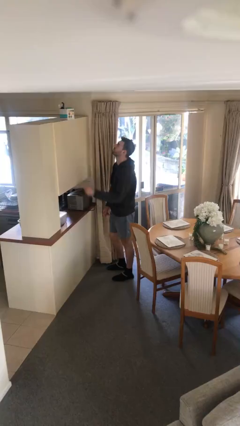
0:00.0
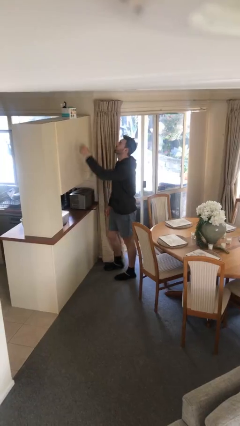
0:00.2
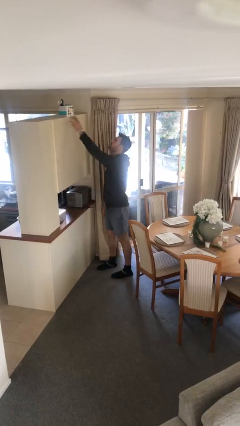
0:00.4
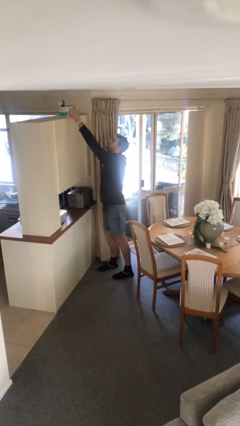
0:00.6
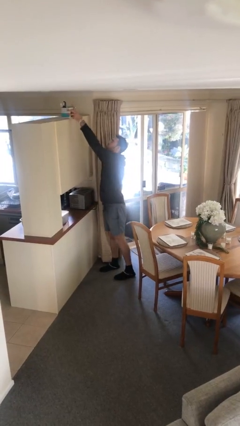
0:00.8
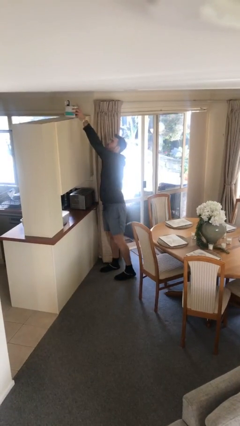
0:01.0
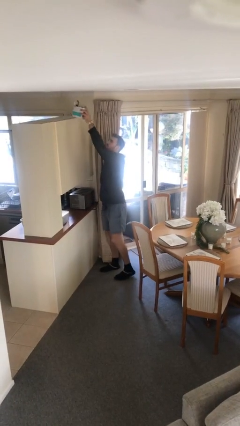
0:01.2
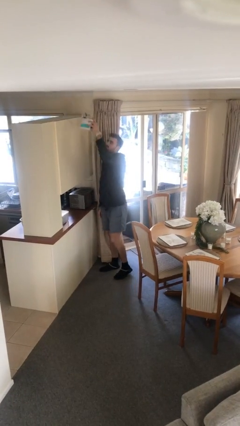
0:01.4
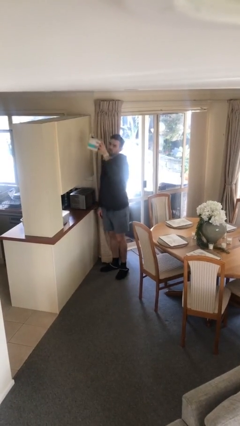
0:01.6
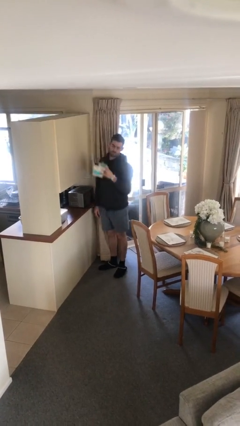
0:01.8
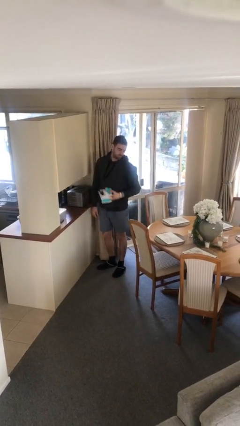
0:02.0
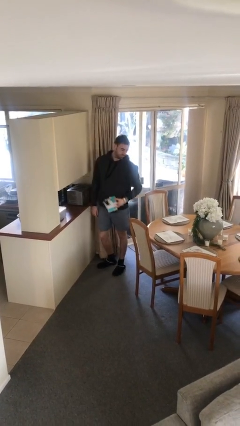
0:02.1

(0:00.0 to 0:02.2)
person picks up object from shelf

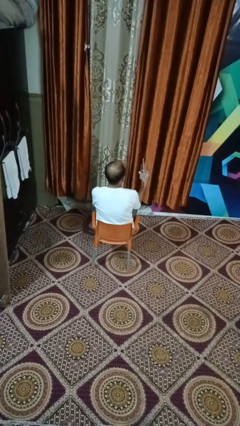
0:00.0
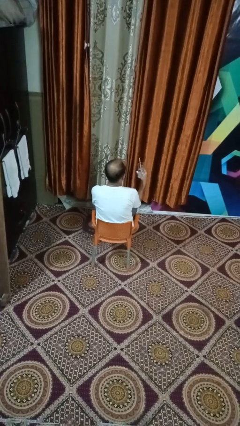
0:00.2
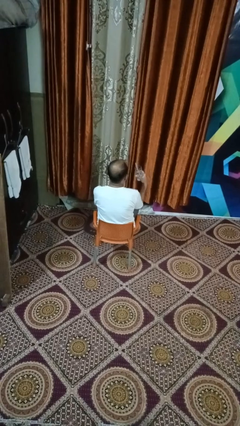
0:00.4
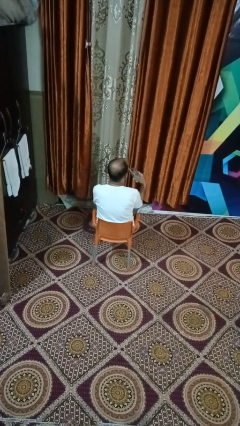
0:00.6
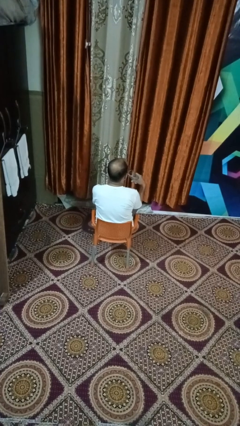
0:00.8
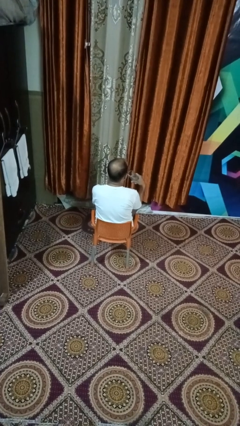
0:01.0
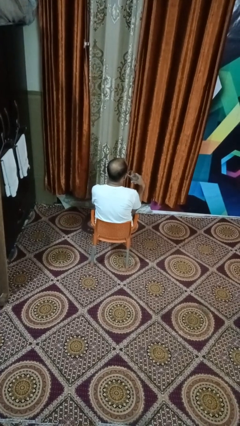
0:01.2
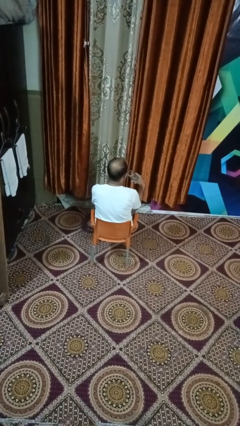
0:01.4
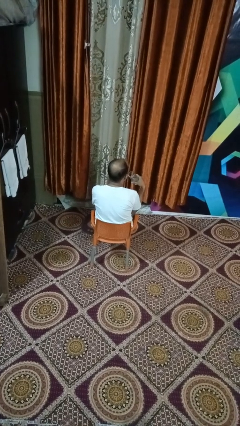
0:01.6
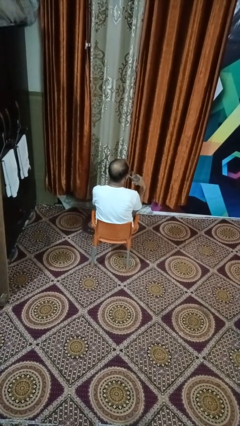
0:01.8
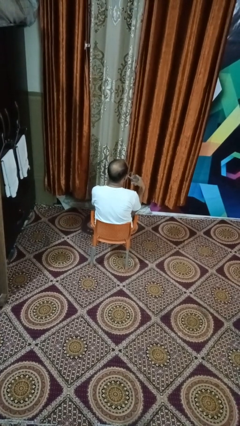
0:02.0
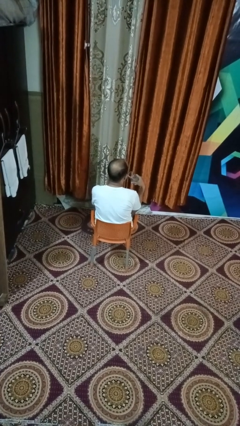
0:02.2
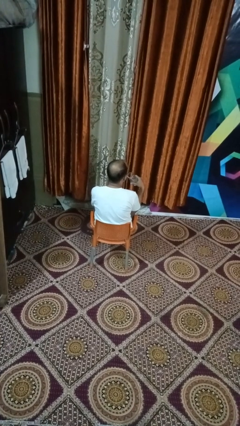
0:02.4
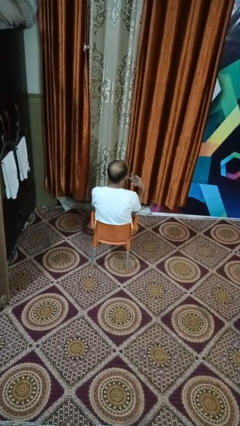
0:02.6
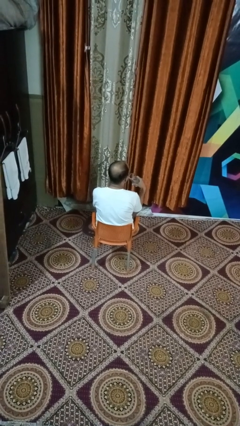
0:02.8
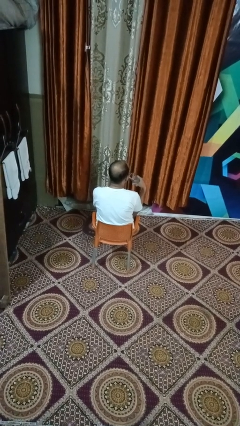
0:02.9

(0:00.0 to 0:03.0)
person drinks from straw

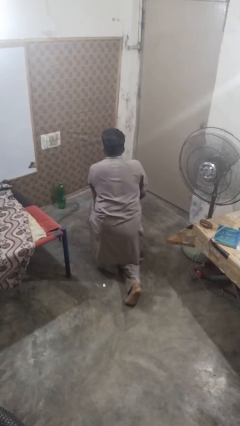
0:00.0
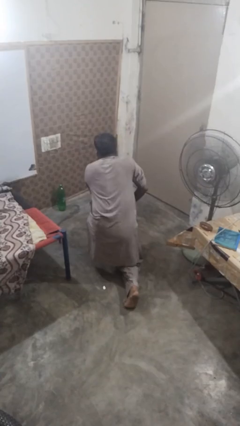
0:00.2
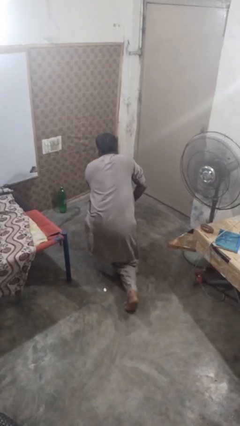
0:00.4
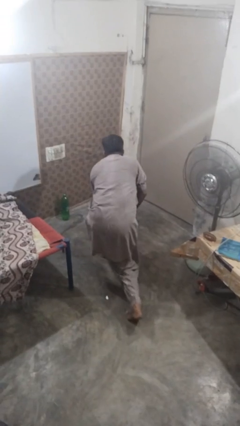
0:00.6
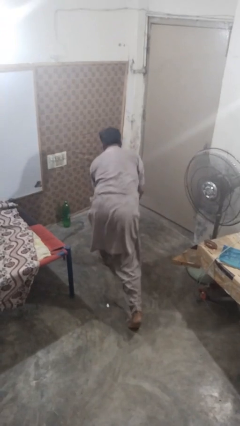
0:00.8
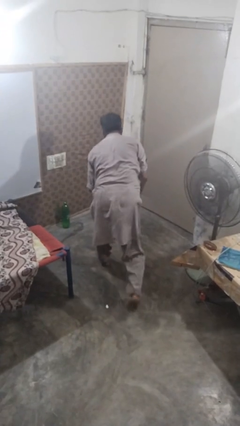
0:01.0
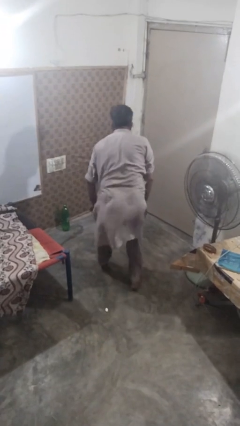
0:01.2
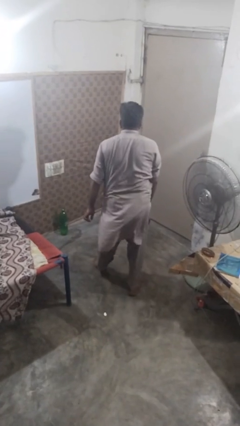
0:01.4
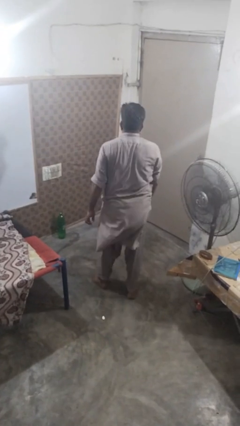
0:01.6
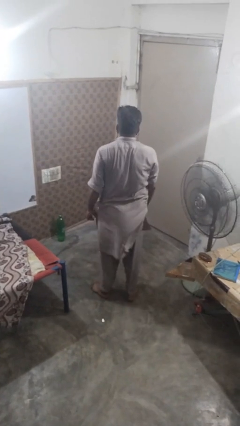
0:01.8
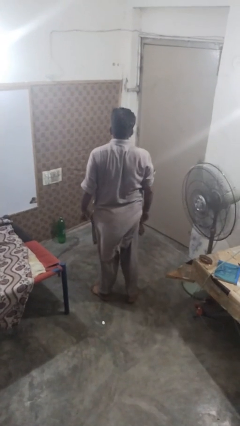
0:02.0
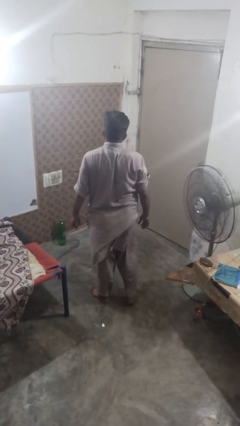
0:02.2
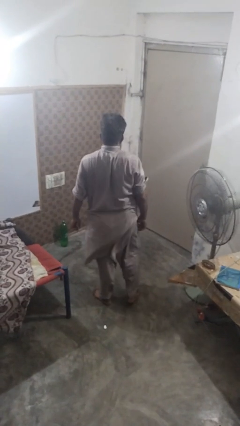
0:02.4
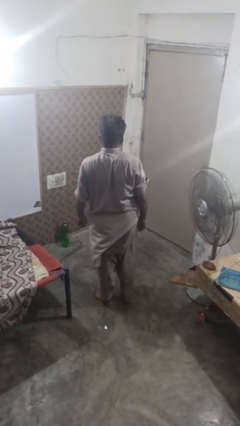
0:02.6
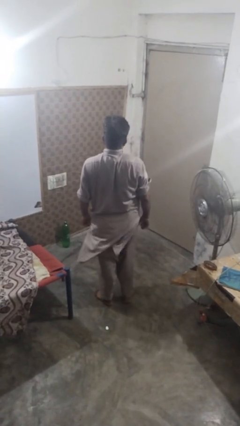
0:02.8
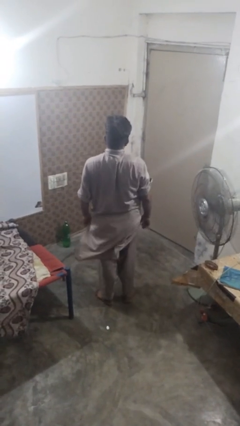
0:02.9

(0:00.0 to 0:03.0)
person stands up from floor

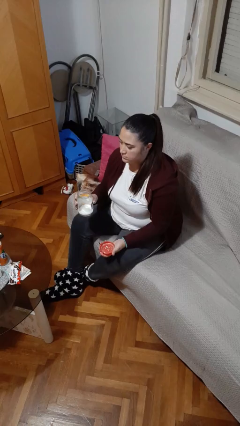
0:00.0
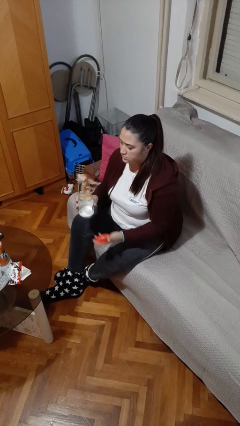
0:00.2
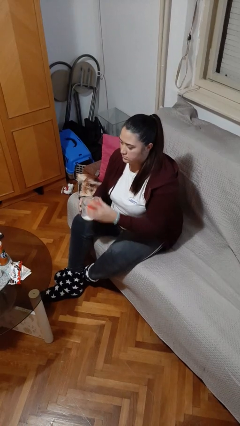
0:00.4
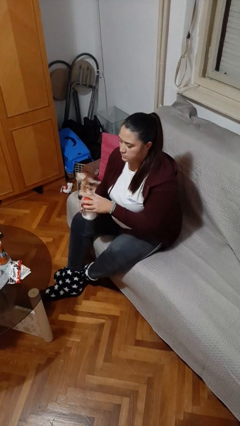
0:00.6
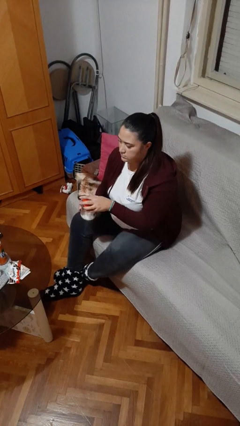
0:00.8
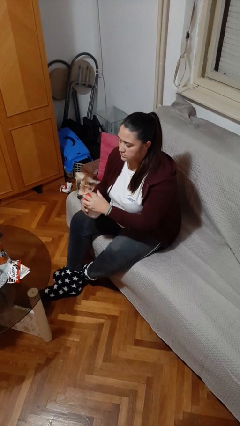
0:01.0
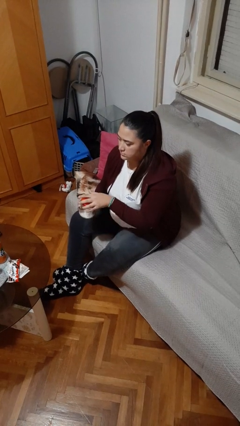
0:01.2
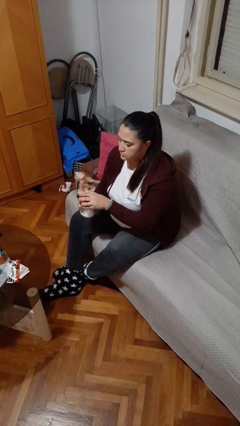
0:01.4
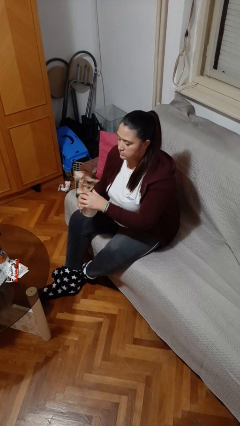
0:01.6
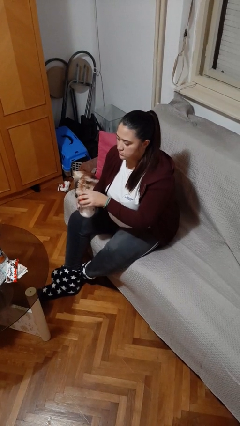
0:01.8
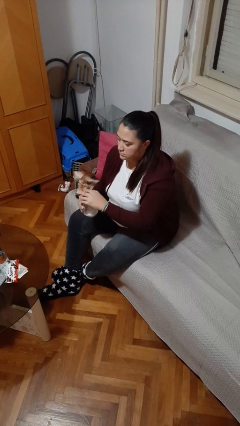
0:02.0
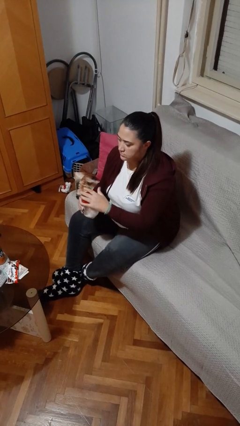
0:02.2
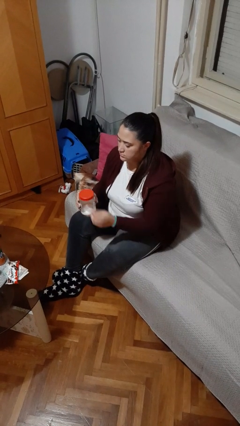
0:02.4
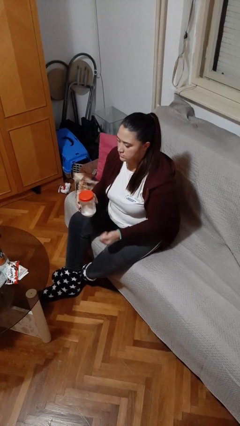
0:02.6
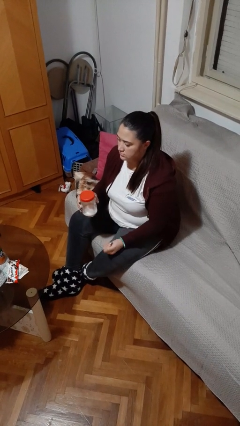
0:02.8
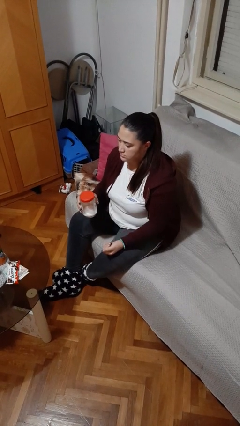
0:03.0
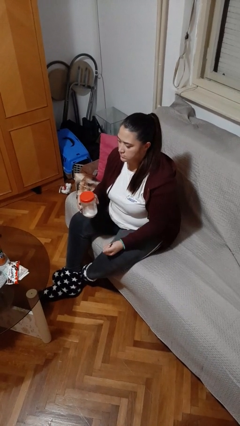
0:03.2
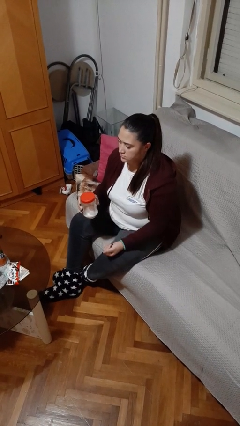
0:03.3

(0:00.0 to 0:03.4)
person closes jar

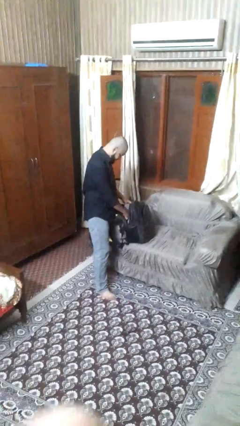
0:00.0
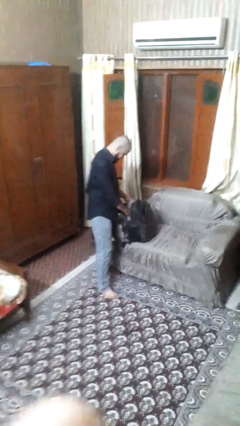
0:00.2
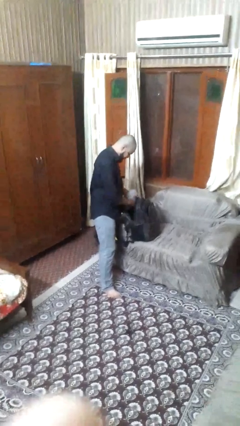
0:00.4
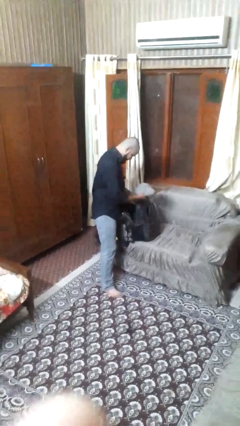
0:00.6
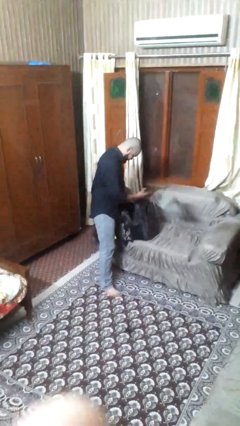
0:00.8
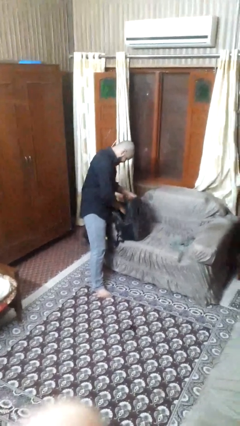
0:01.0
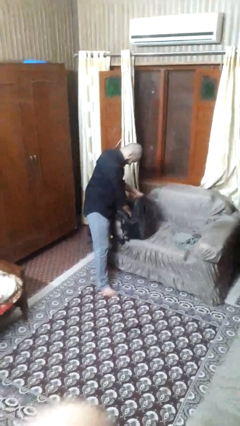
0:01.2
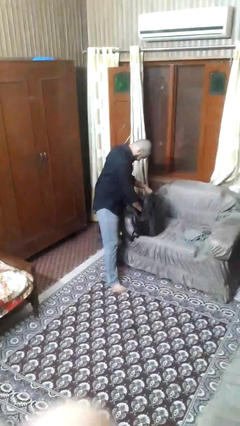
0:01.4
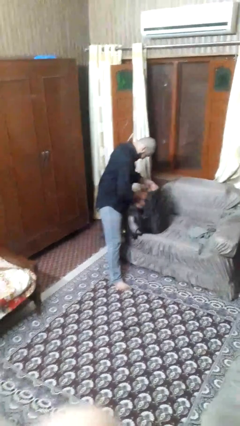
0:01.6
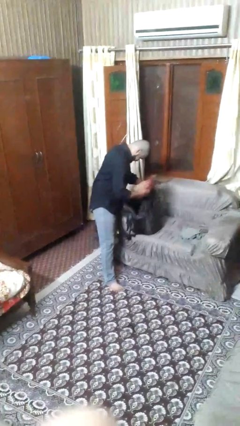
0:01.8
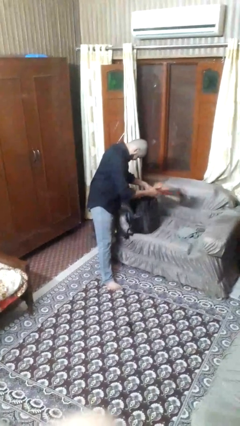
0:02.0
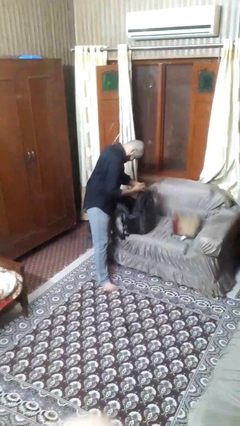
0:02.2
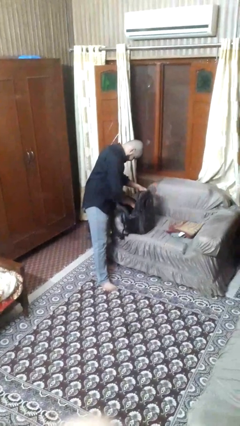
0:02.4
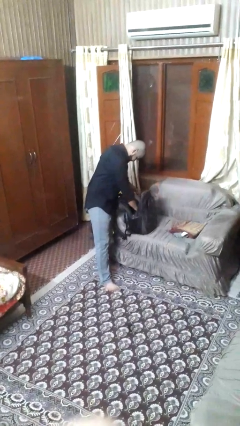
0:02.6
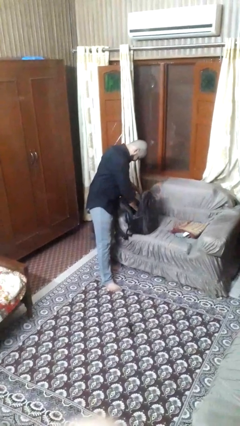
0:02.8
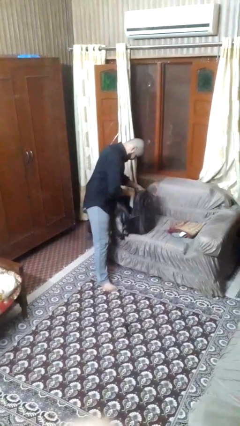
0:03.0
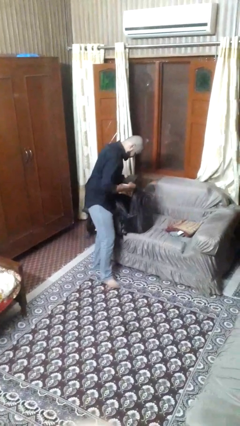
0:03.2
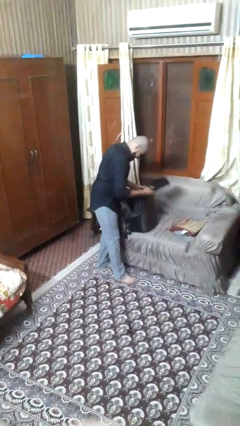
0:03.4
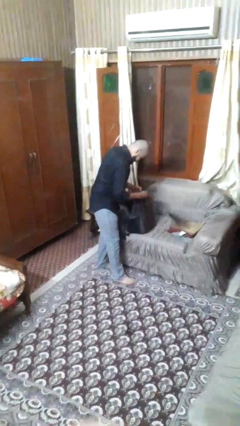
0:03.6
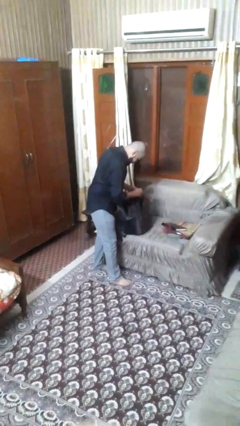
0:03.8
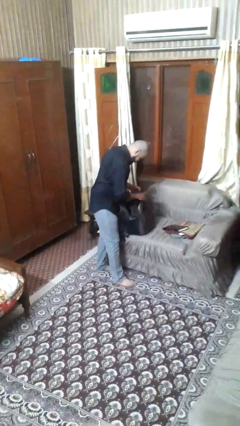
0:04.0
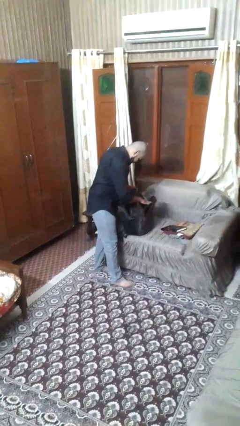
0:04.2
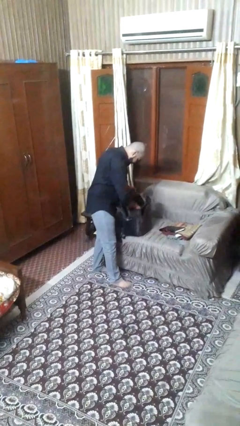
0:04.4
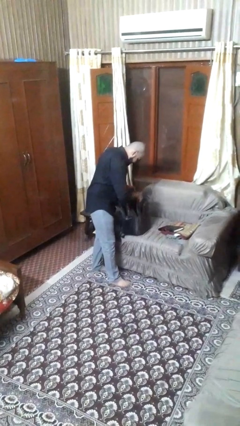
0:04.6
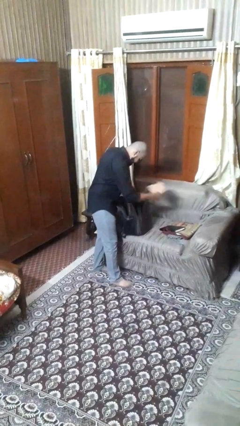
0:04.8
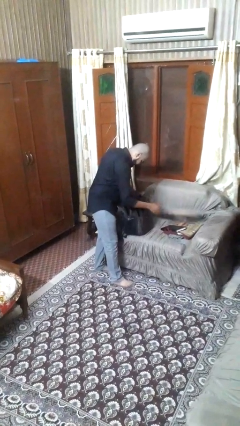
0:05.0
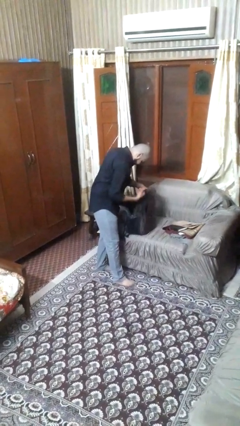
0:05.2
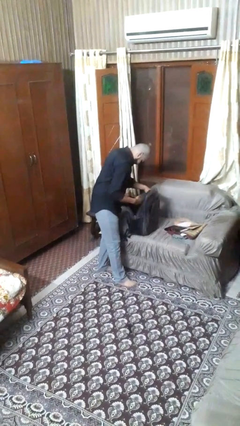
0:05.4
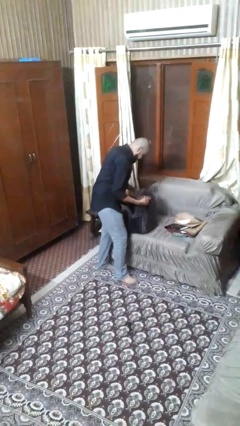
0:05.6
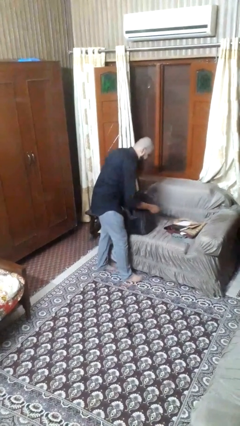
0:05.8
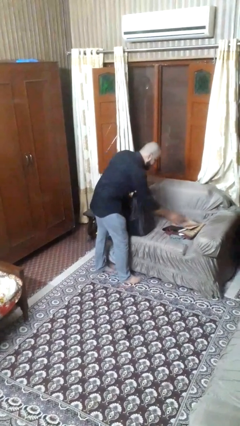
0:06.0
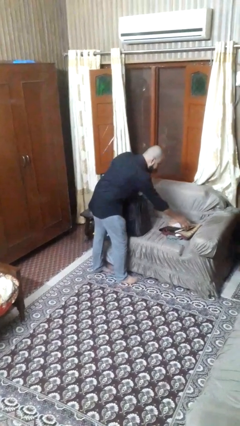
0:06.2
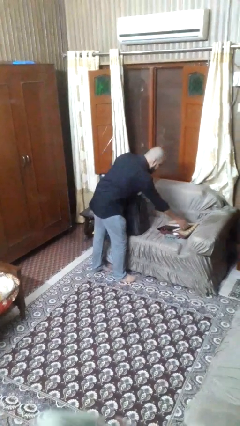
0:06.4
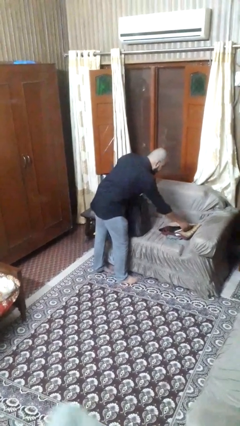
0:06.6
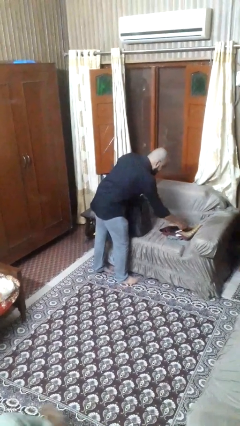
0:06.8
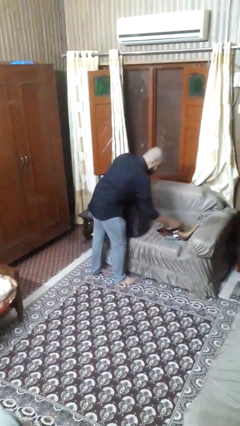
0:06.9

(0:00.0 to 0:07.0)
person searches in backpack
